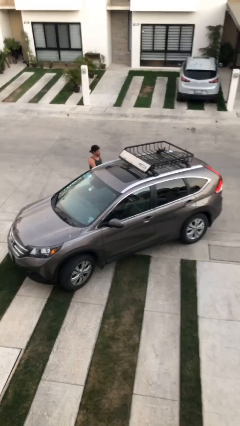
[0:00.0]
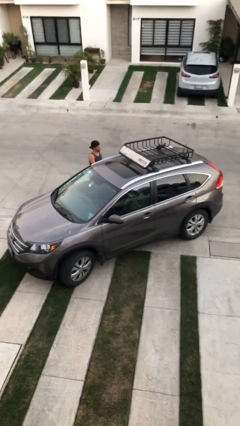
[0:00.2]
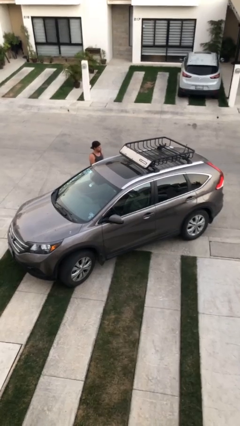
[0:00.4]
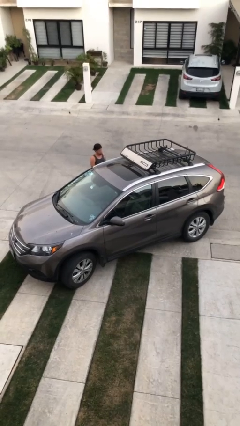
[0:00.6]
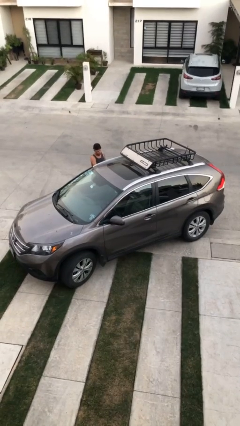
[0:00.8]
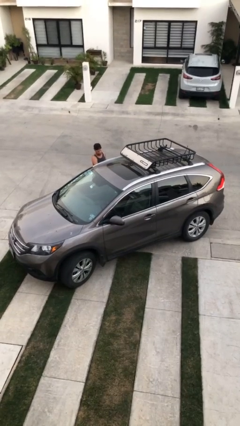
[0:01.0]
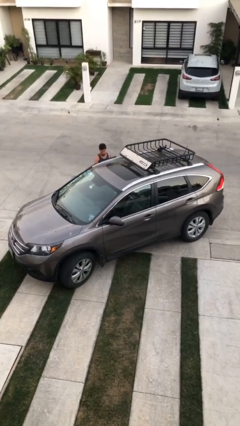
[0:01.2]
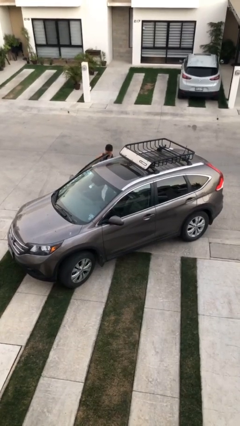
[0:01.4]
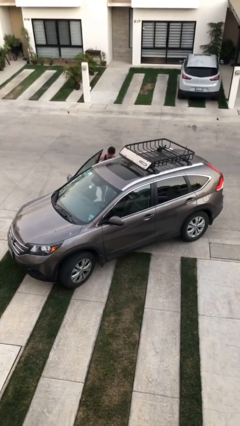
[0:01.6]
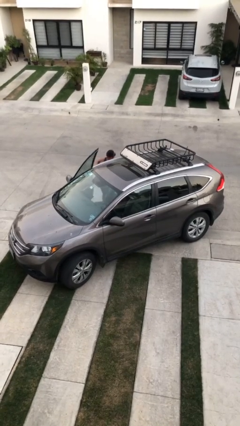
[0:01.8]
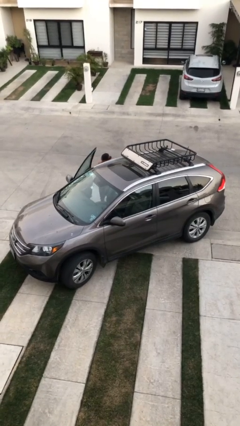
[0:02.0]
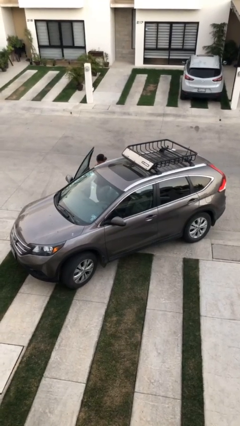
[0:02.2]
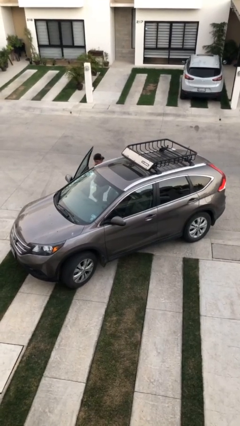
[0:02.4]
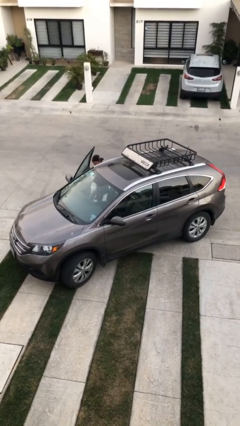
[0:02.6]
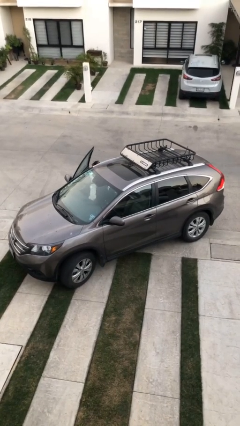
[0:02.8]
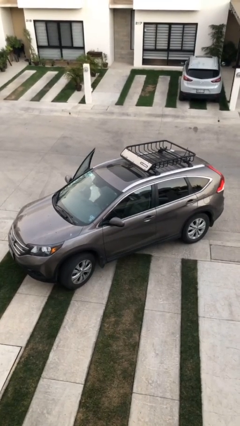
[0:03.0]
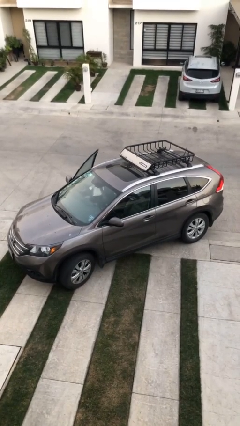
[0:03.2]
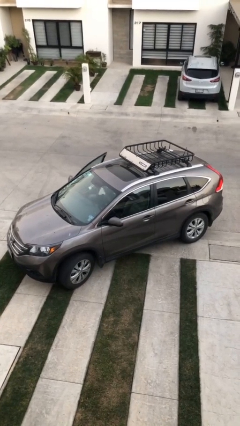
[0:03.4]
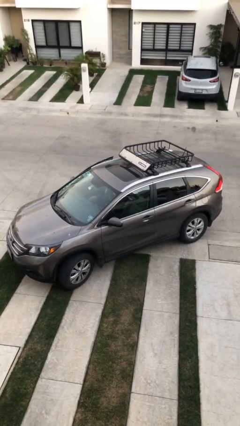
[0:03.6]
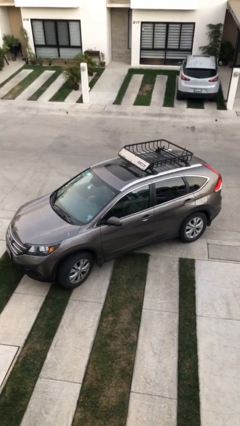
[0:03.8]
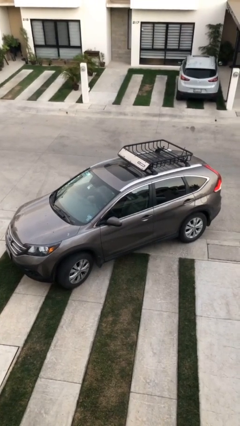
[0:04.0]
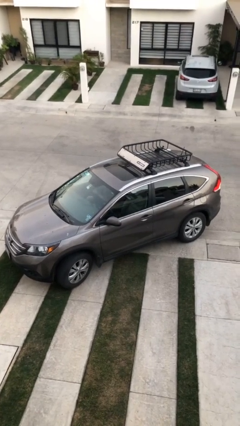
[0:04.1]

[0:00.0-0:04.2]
car picks up person

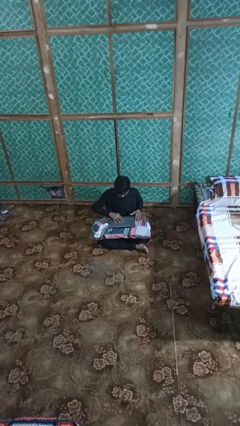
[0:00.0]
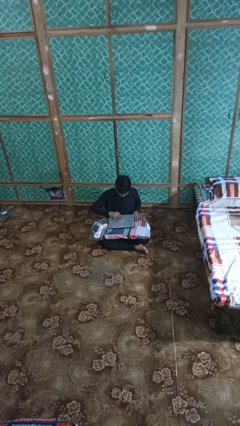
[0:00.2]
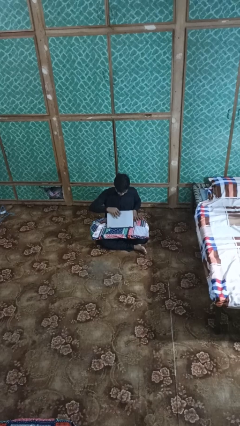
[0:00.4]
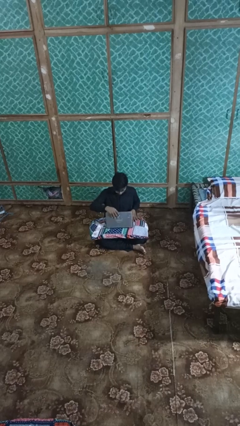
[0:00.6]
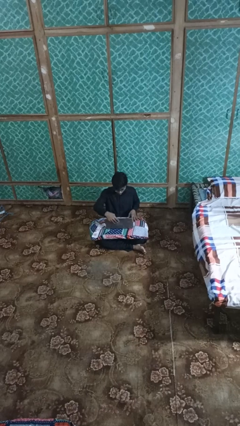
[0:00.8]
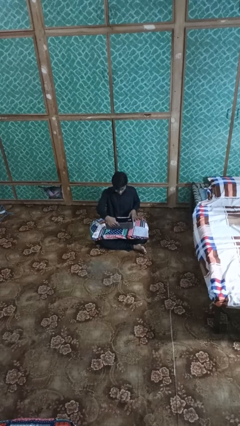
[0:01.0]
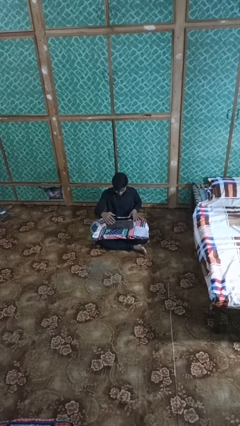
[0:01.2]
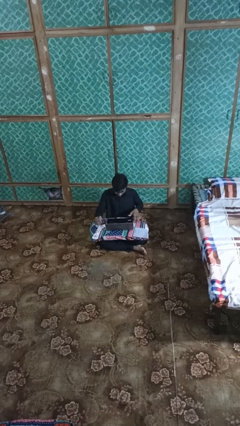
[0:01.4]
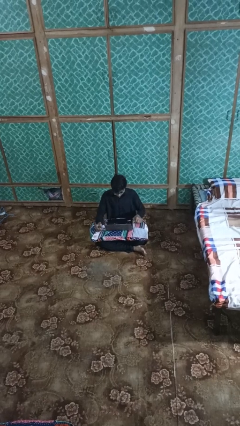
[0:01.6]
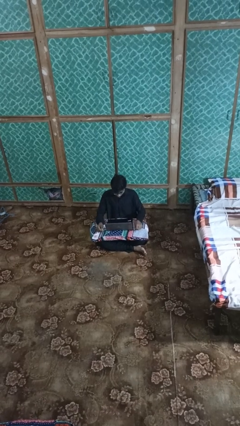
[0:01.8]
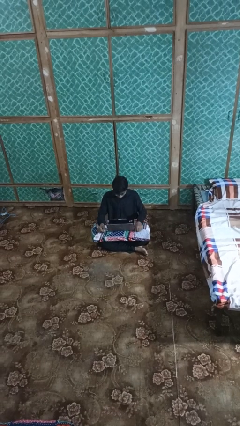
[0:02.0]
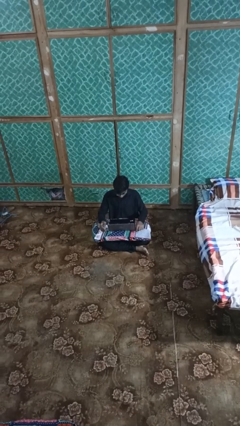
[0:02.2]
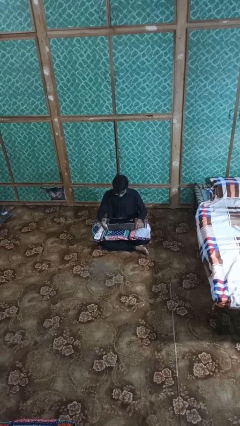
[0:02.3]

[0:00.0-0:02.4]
person opens laptop

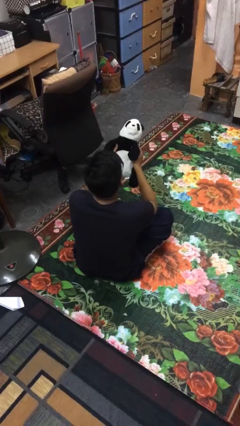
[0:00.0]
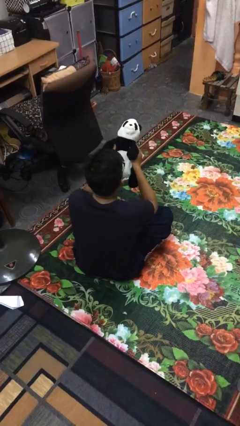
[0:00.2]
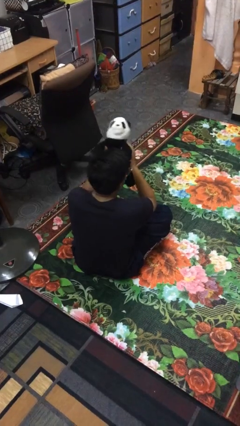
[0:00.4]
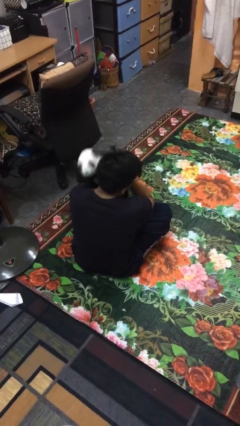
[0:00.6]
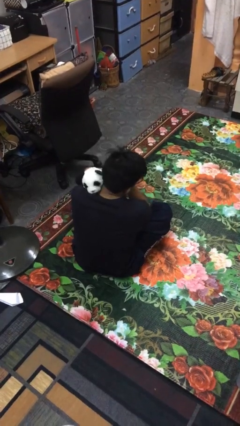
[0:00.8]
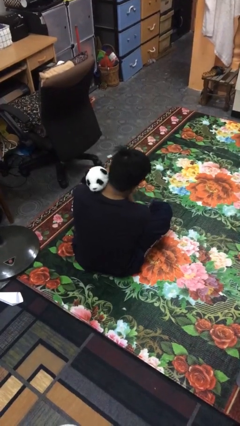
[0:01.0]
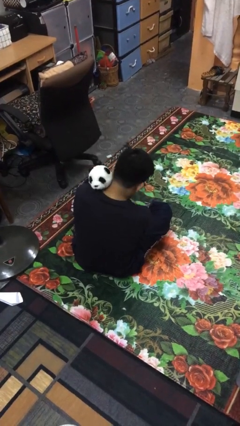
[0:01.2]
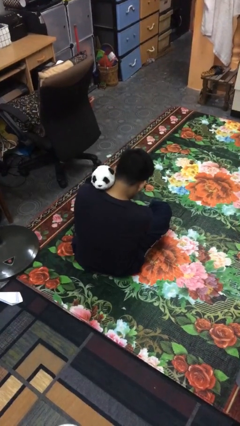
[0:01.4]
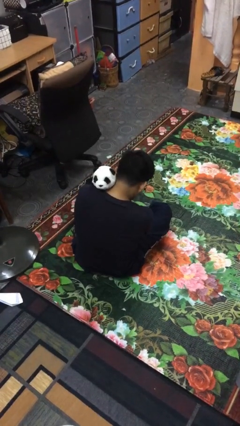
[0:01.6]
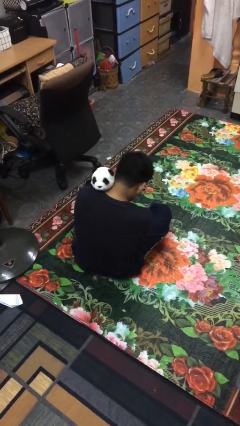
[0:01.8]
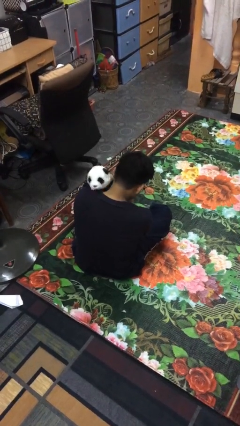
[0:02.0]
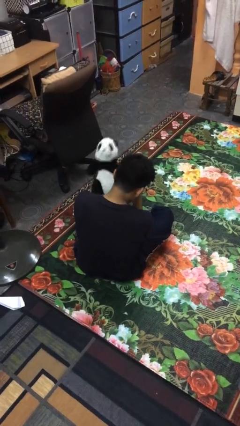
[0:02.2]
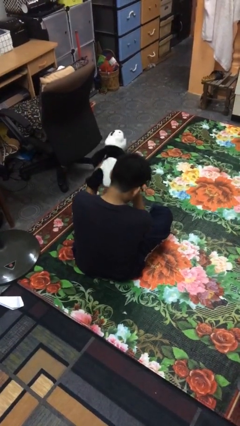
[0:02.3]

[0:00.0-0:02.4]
person hugs stuffed animal

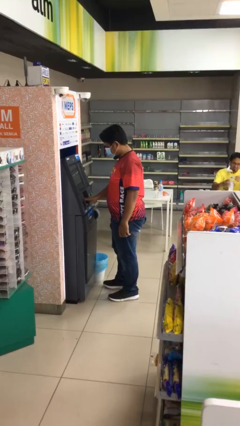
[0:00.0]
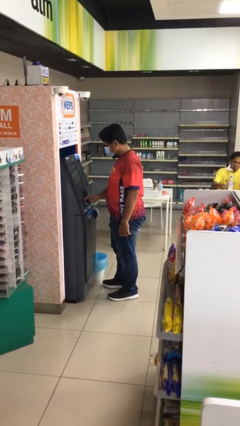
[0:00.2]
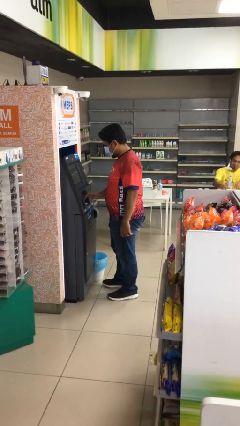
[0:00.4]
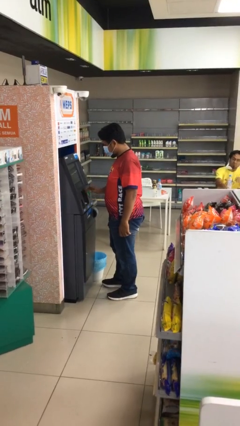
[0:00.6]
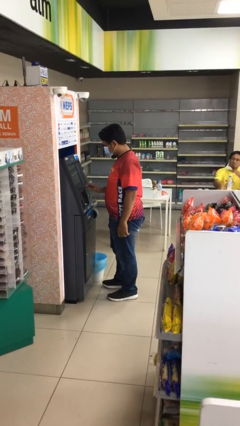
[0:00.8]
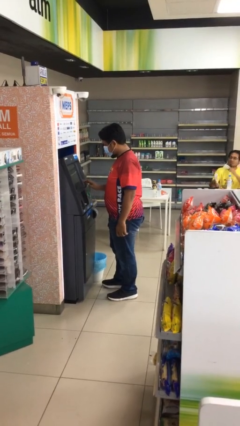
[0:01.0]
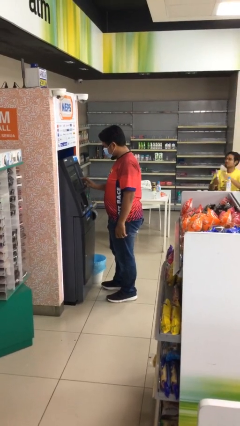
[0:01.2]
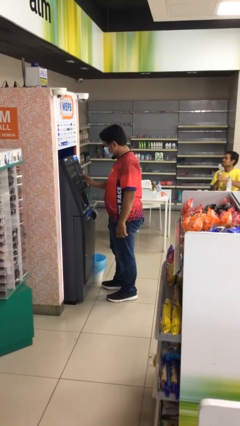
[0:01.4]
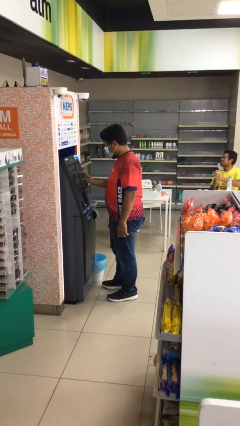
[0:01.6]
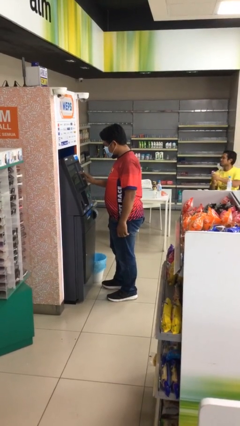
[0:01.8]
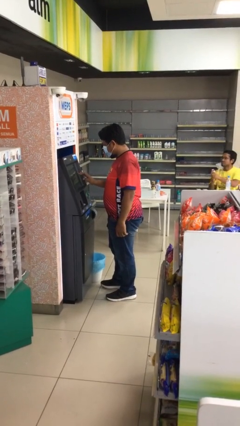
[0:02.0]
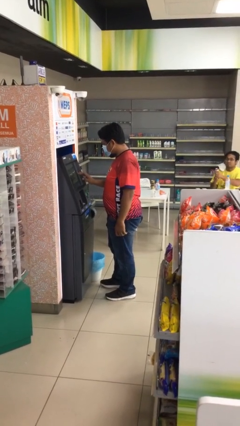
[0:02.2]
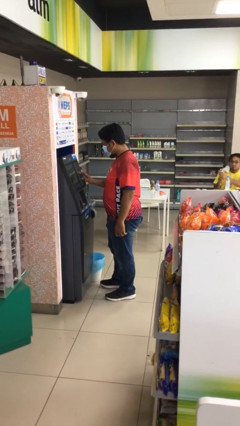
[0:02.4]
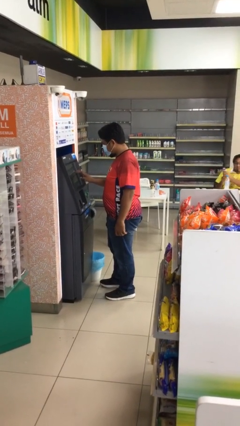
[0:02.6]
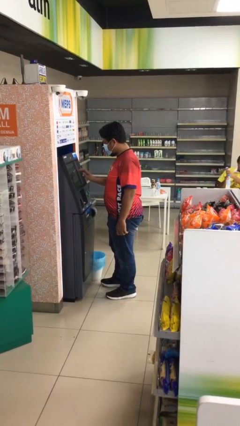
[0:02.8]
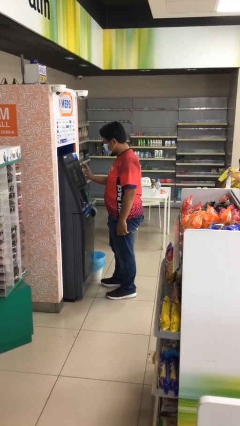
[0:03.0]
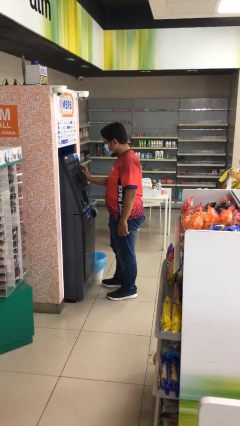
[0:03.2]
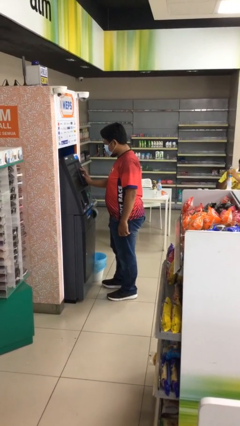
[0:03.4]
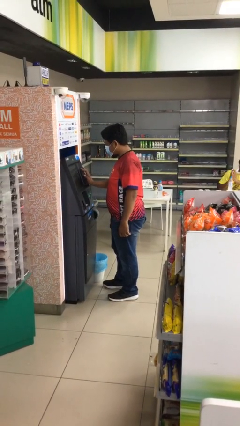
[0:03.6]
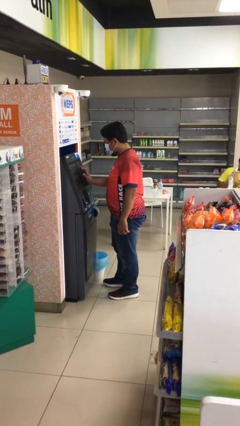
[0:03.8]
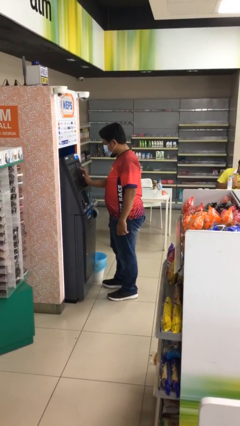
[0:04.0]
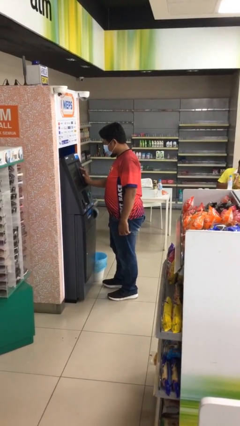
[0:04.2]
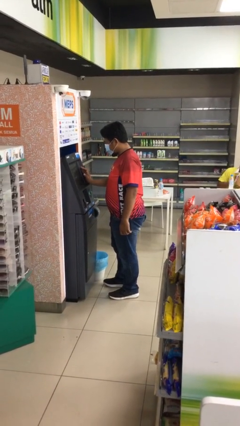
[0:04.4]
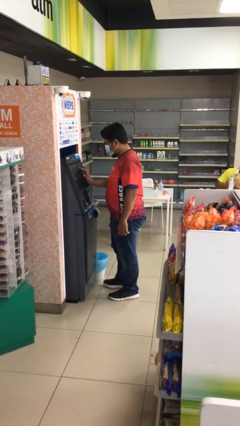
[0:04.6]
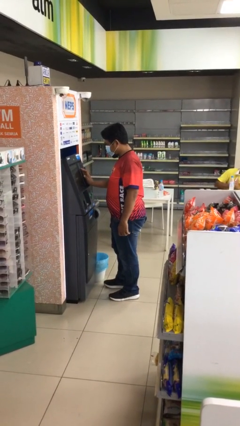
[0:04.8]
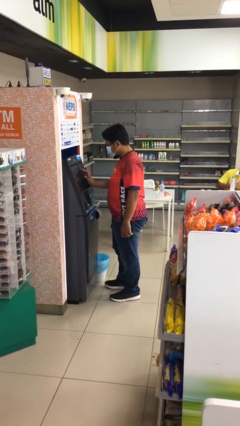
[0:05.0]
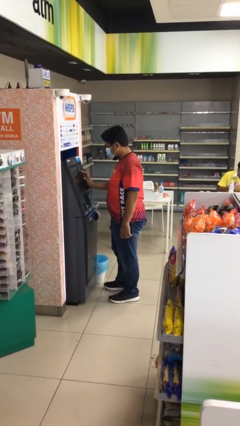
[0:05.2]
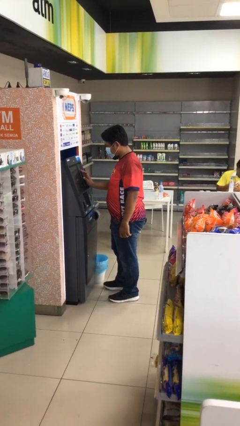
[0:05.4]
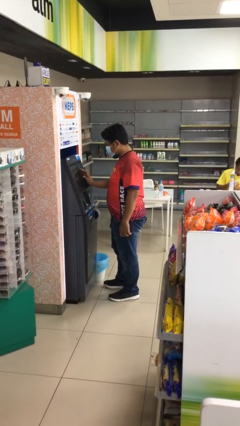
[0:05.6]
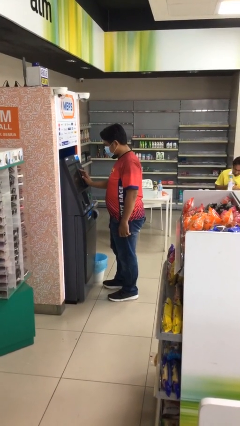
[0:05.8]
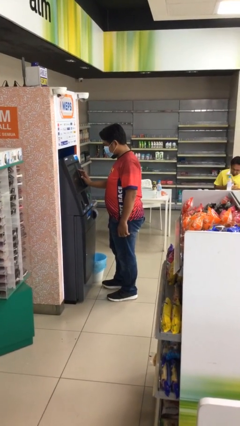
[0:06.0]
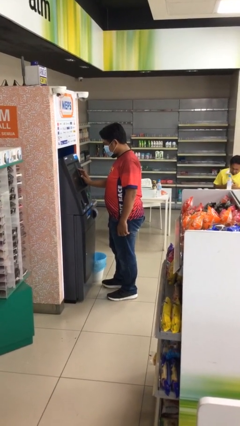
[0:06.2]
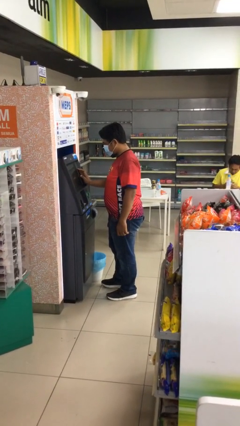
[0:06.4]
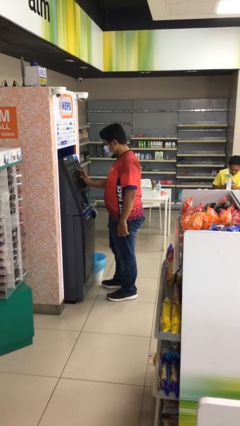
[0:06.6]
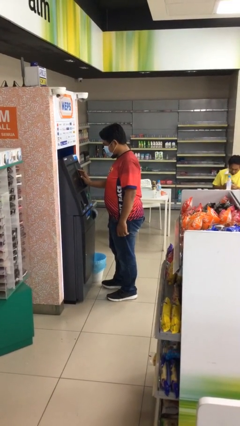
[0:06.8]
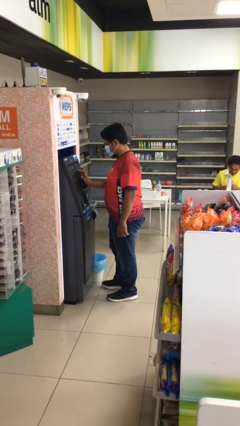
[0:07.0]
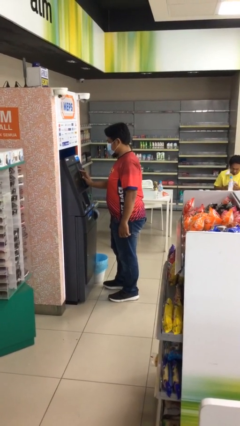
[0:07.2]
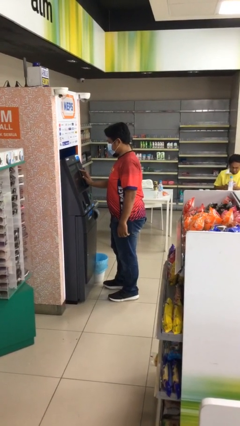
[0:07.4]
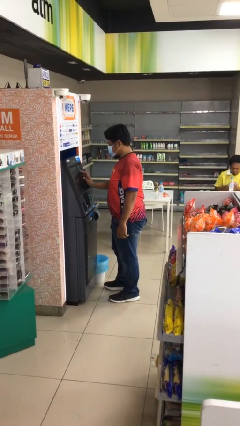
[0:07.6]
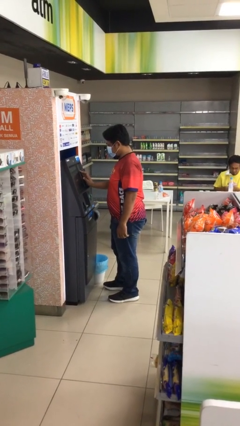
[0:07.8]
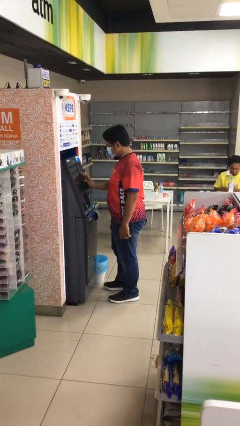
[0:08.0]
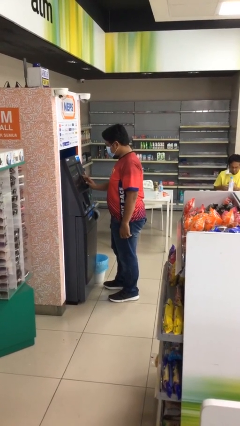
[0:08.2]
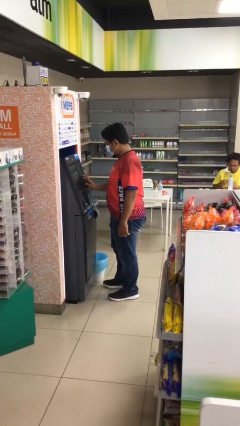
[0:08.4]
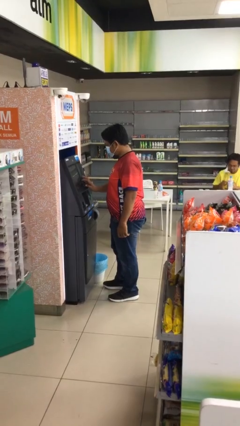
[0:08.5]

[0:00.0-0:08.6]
person purchases from machine
